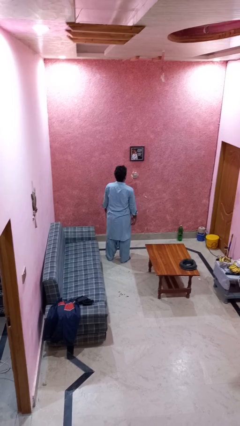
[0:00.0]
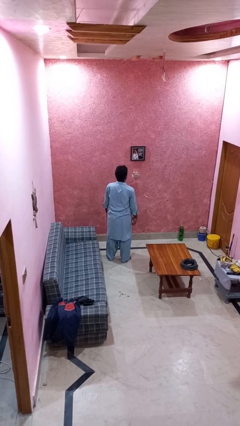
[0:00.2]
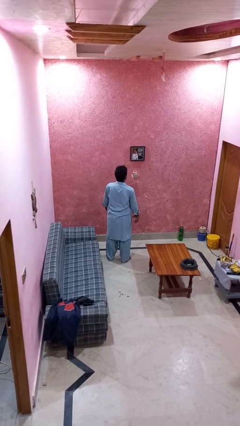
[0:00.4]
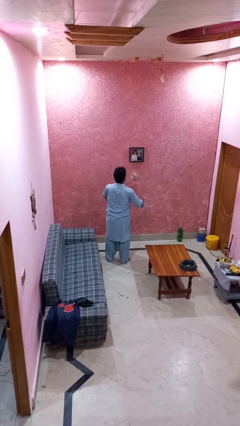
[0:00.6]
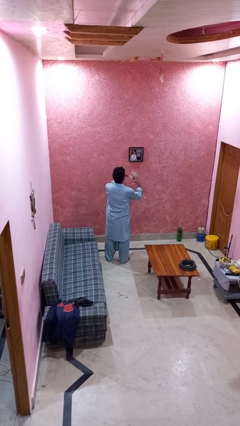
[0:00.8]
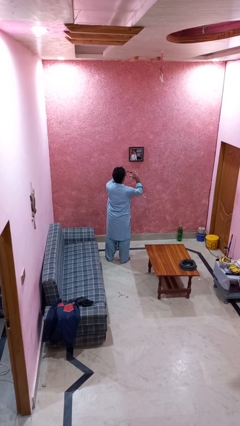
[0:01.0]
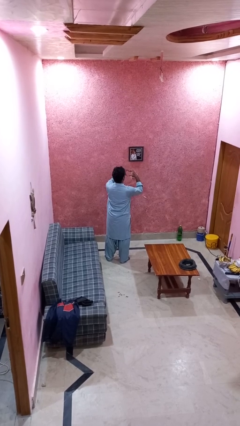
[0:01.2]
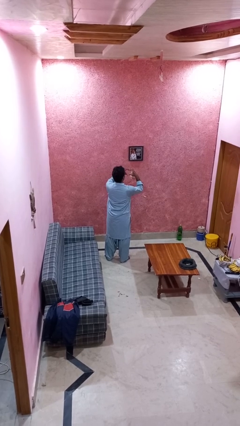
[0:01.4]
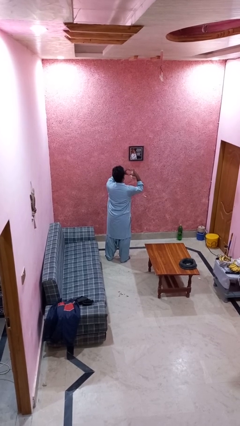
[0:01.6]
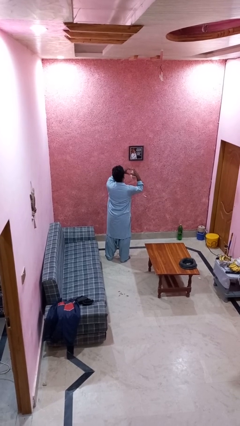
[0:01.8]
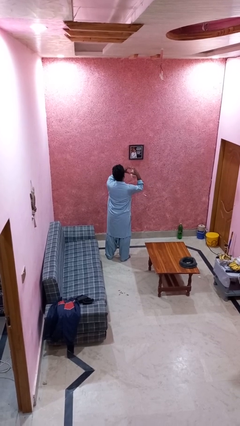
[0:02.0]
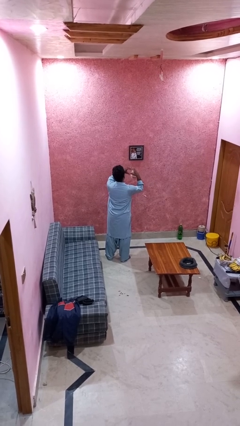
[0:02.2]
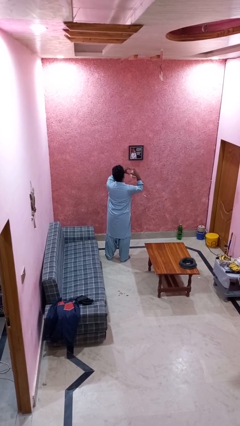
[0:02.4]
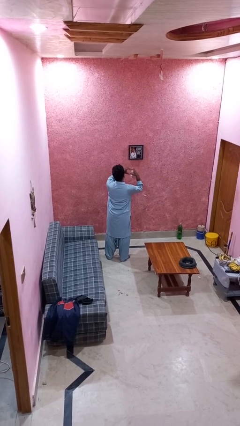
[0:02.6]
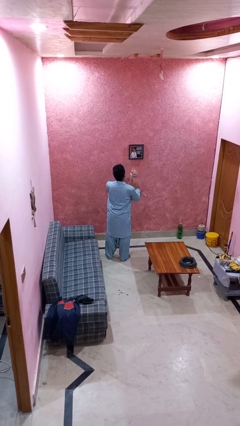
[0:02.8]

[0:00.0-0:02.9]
person gestures heart

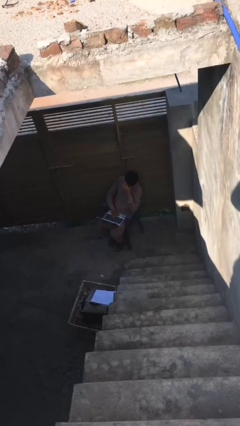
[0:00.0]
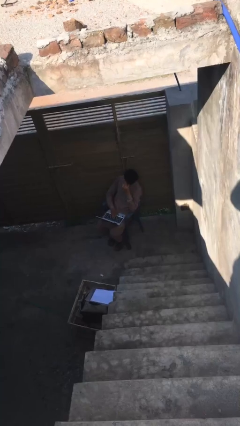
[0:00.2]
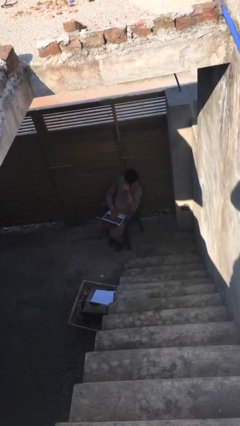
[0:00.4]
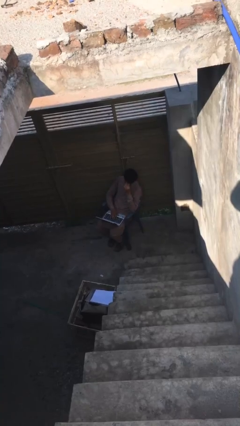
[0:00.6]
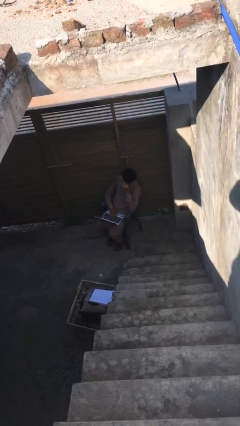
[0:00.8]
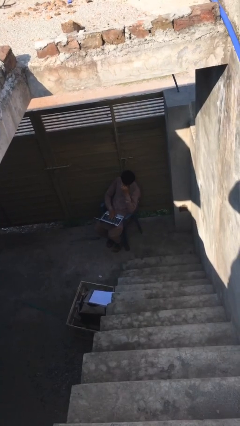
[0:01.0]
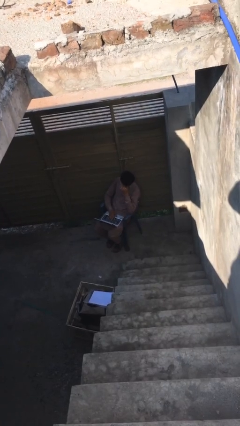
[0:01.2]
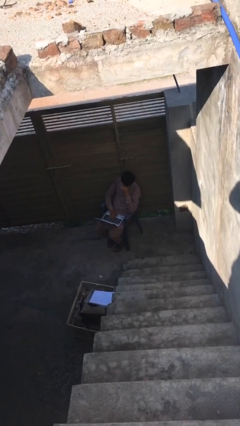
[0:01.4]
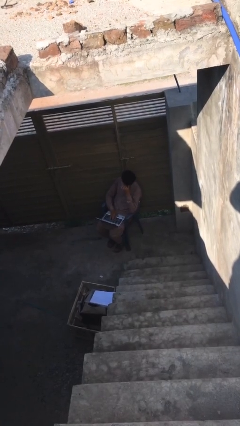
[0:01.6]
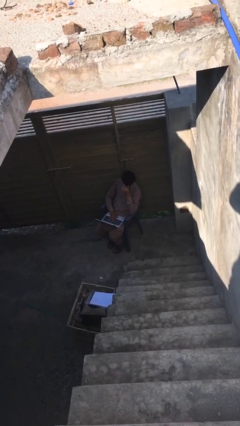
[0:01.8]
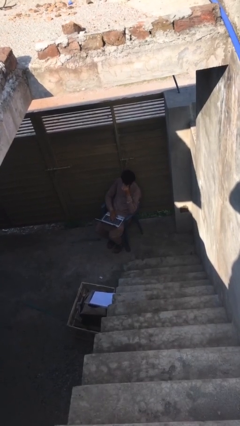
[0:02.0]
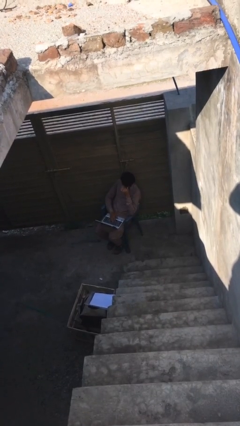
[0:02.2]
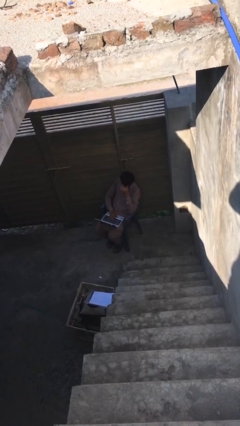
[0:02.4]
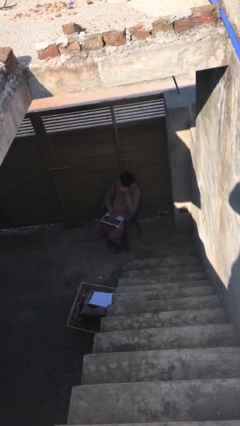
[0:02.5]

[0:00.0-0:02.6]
person interacts with laptop

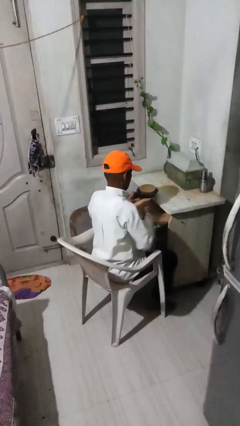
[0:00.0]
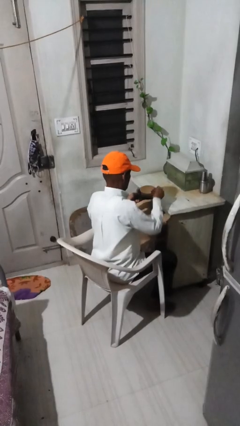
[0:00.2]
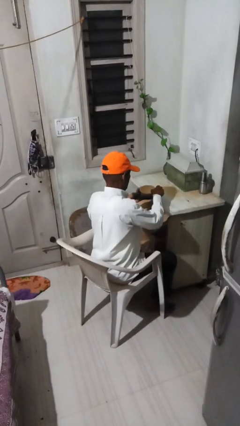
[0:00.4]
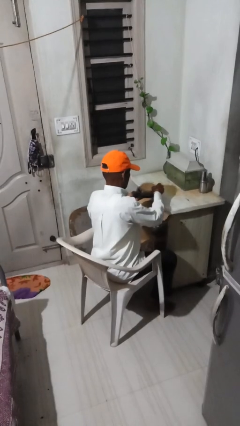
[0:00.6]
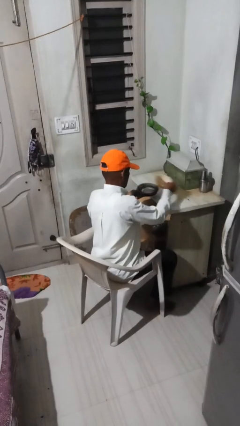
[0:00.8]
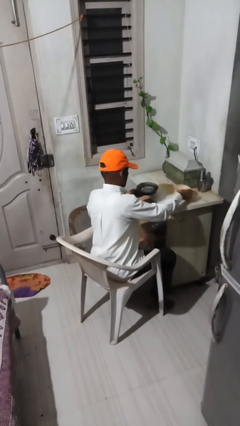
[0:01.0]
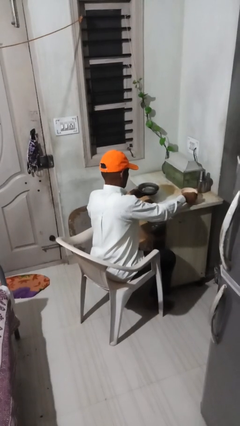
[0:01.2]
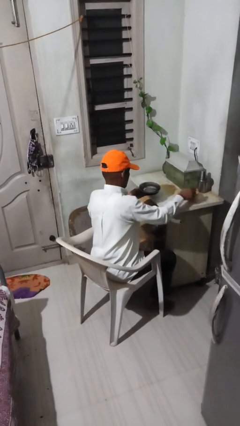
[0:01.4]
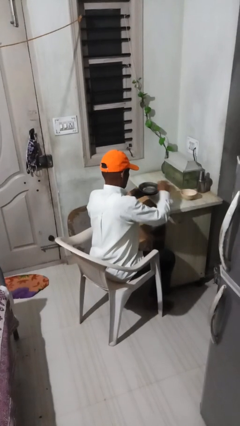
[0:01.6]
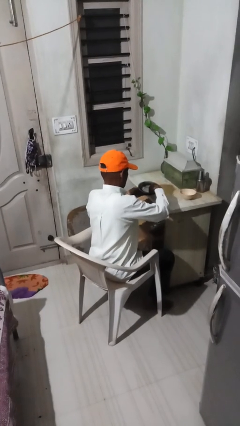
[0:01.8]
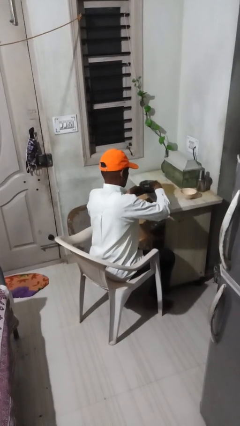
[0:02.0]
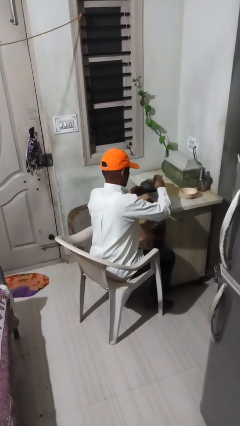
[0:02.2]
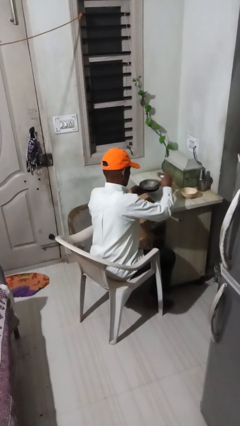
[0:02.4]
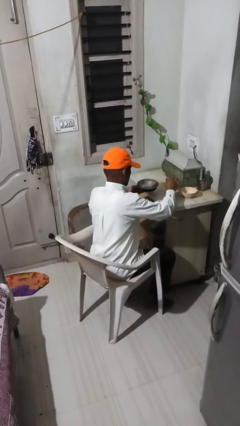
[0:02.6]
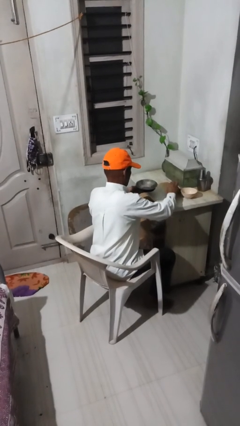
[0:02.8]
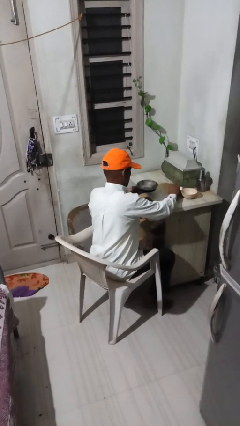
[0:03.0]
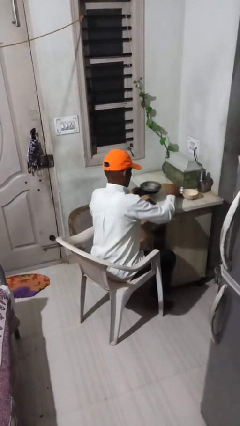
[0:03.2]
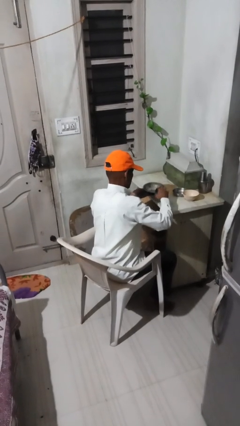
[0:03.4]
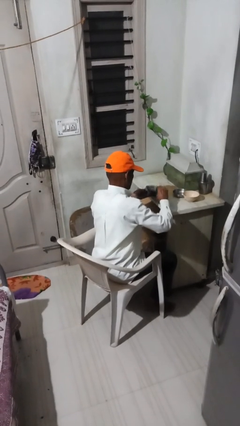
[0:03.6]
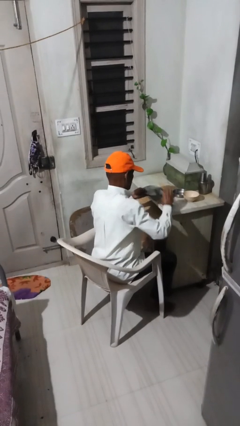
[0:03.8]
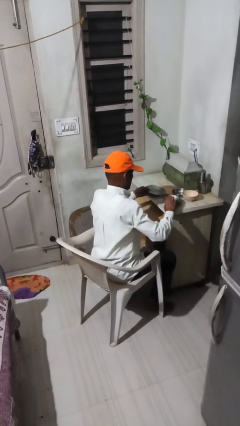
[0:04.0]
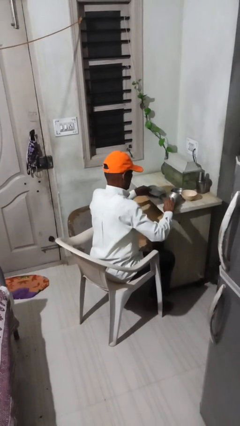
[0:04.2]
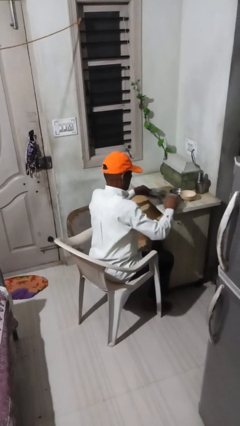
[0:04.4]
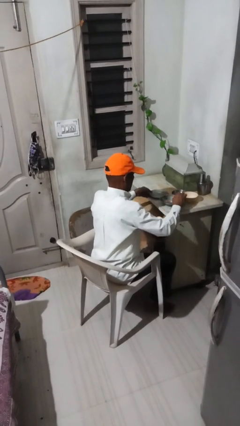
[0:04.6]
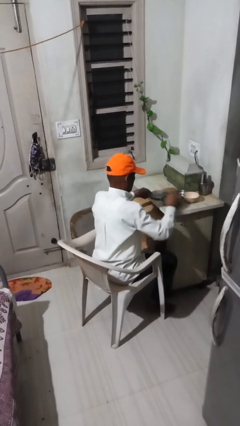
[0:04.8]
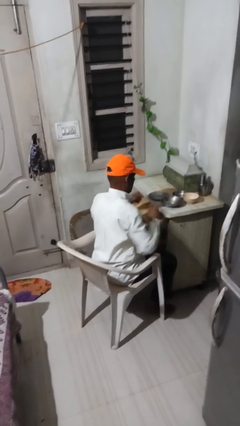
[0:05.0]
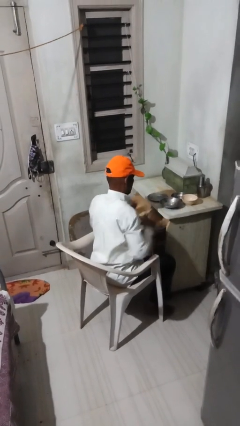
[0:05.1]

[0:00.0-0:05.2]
person sets table

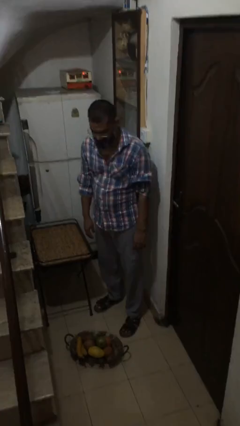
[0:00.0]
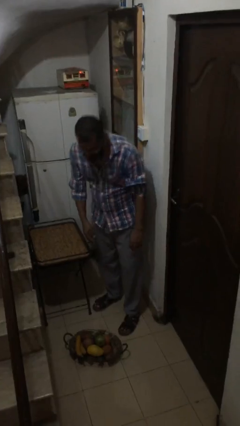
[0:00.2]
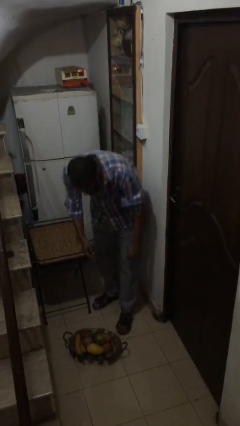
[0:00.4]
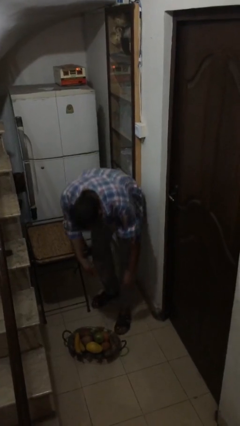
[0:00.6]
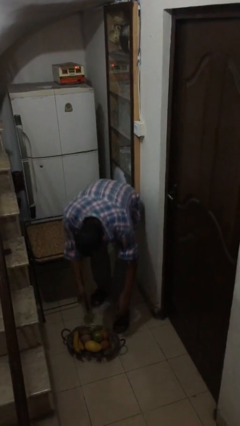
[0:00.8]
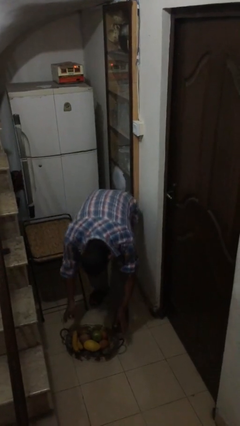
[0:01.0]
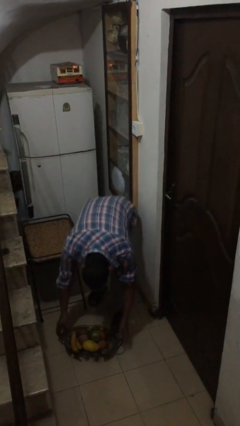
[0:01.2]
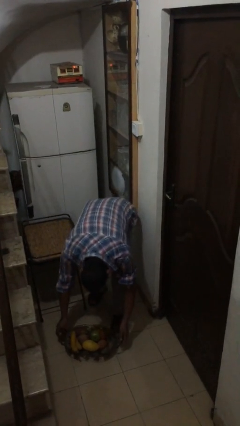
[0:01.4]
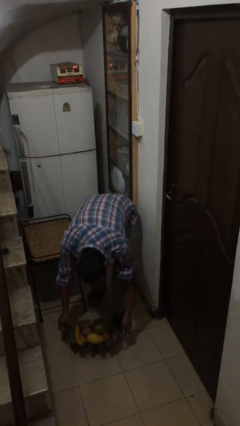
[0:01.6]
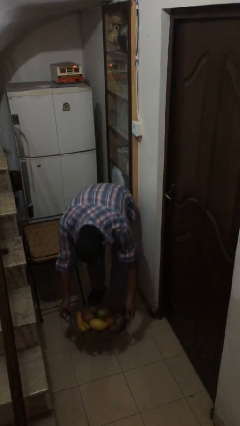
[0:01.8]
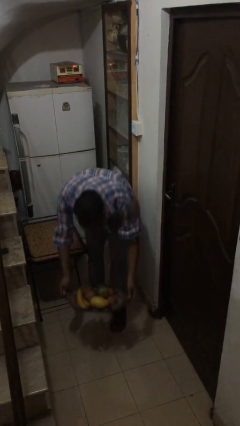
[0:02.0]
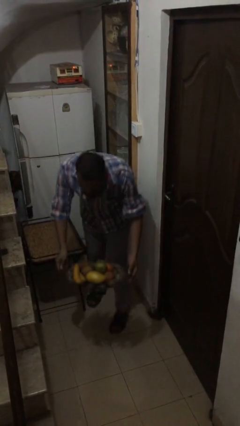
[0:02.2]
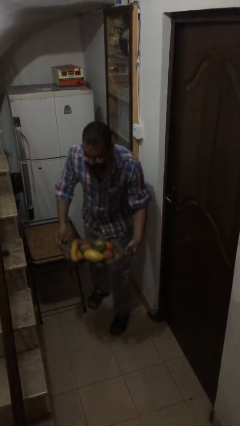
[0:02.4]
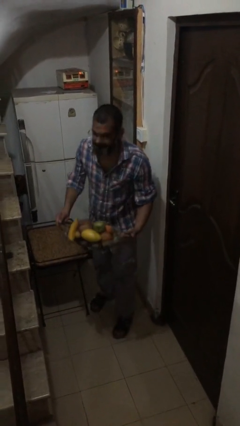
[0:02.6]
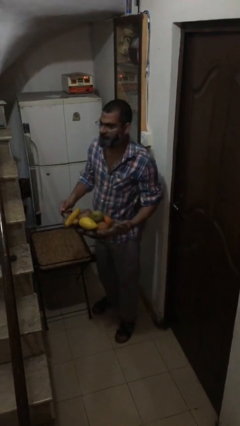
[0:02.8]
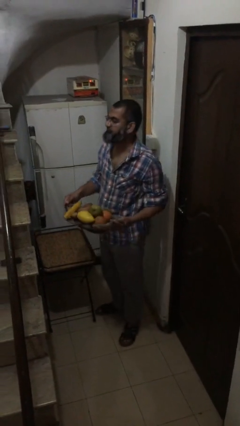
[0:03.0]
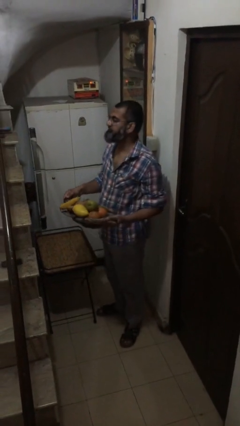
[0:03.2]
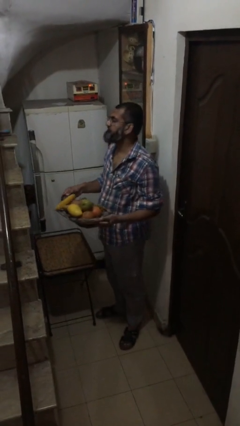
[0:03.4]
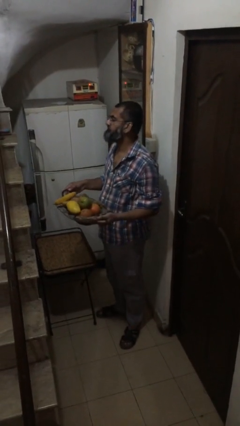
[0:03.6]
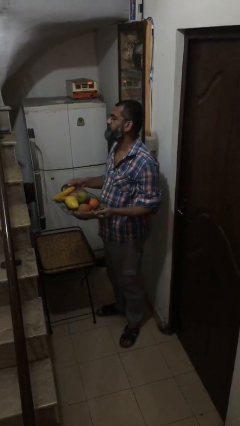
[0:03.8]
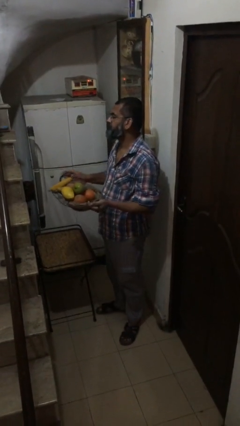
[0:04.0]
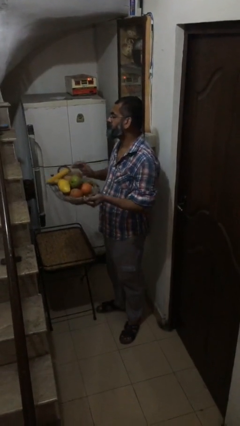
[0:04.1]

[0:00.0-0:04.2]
person picks up object from floor

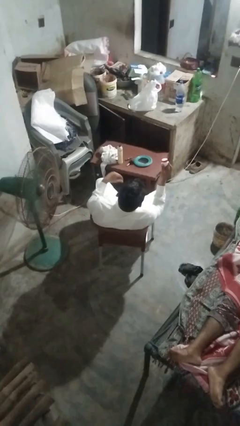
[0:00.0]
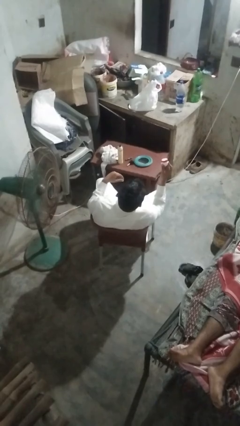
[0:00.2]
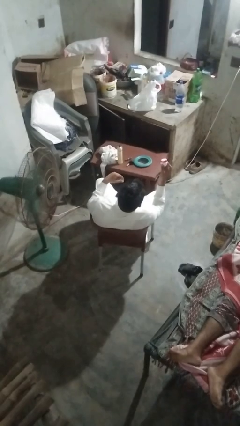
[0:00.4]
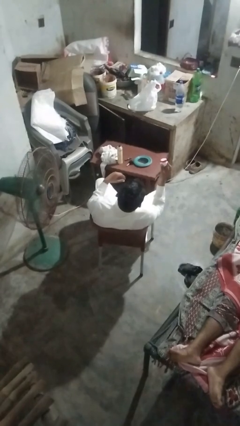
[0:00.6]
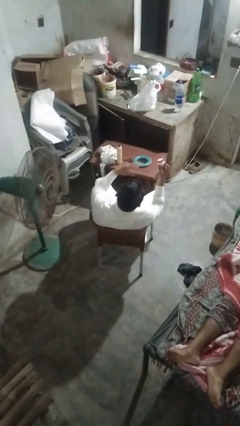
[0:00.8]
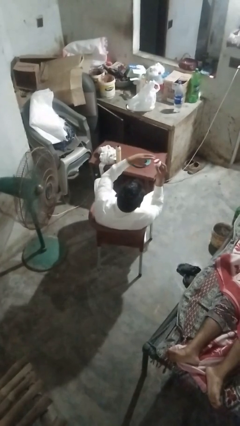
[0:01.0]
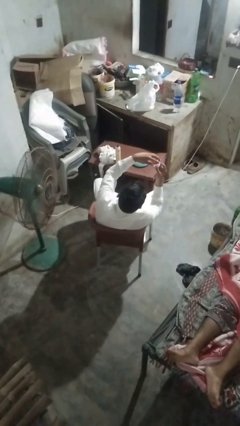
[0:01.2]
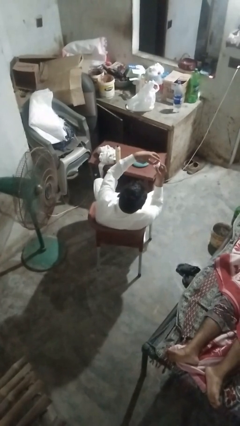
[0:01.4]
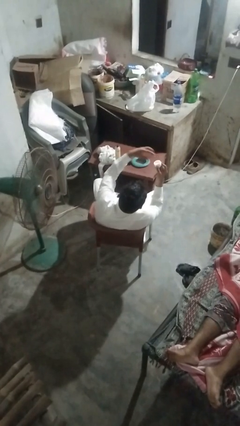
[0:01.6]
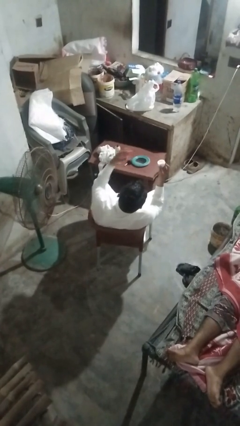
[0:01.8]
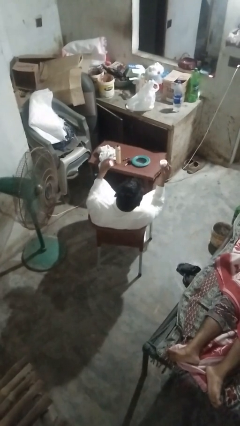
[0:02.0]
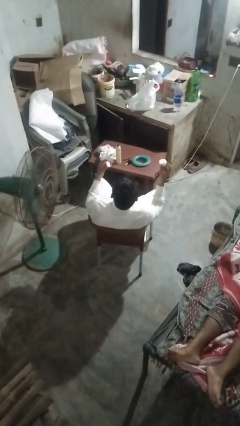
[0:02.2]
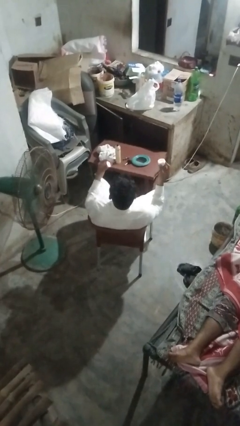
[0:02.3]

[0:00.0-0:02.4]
person opens jar

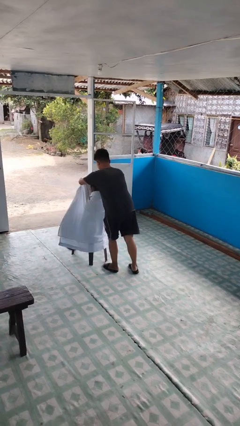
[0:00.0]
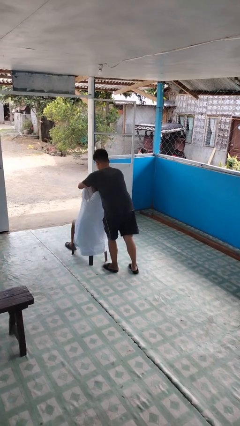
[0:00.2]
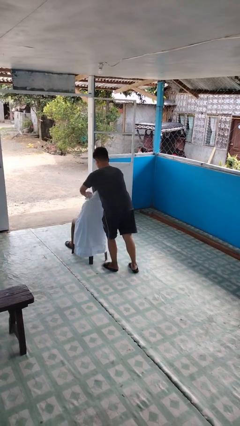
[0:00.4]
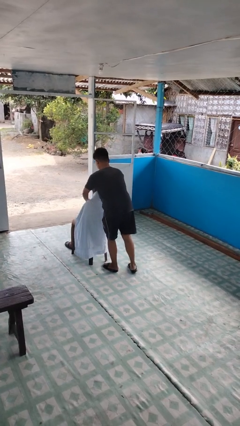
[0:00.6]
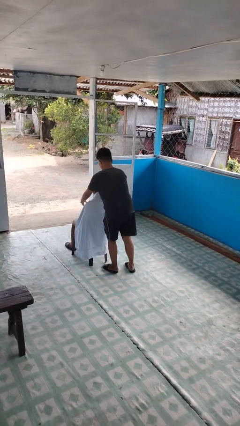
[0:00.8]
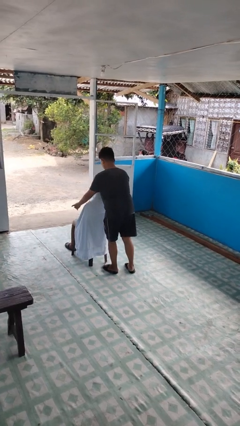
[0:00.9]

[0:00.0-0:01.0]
person covers friend with blanket
